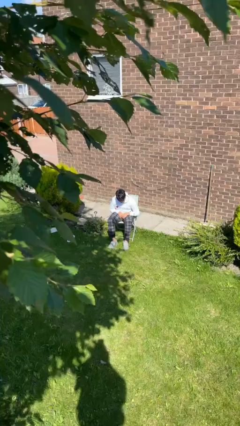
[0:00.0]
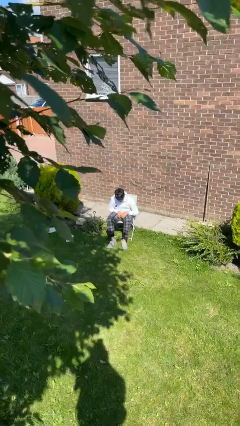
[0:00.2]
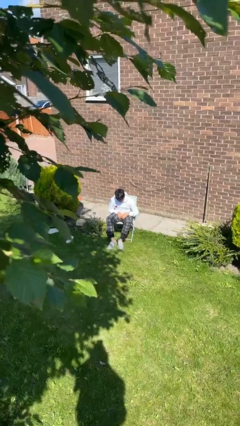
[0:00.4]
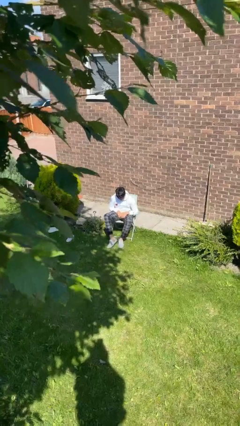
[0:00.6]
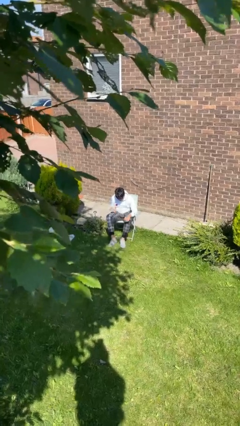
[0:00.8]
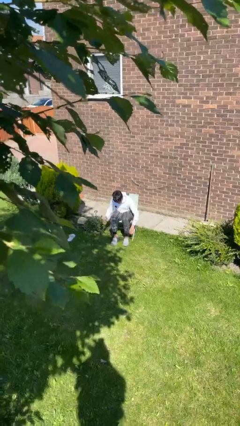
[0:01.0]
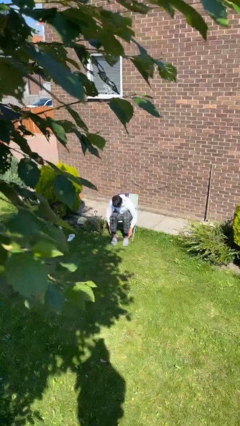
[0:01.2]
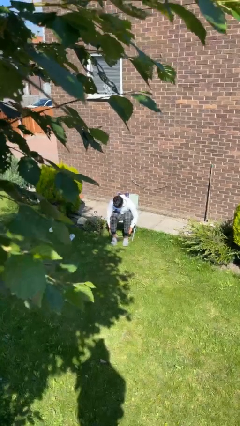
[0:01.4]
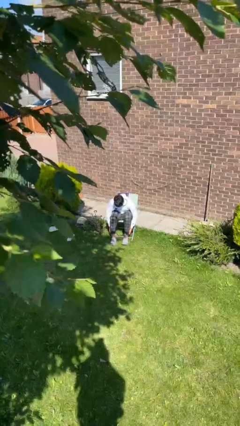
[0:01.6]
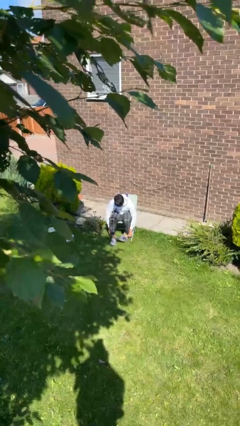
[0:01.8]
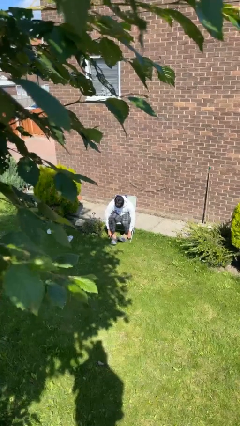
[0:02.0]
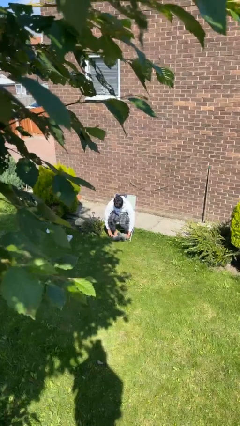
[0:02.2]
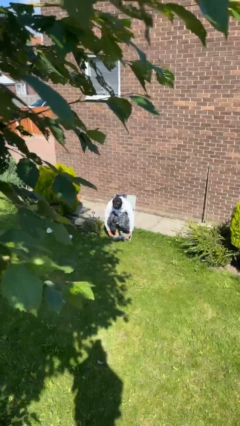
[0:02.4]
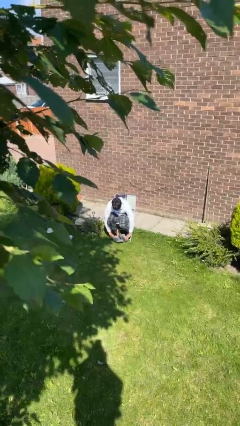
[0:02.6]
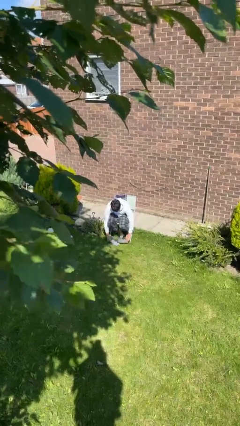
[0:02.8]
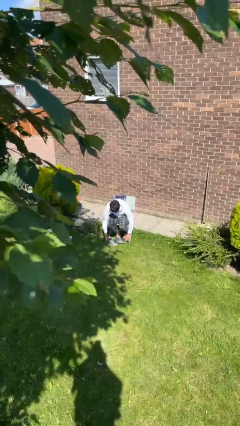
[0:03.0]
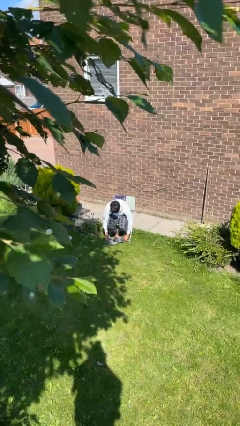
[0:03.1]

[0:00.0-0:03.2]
person takes off shoes

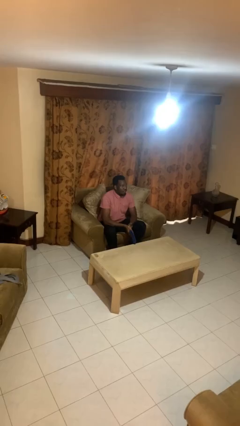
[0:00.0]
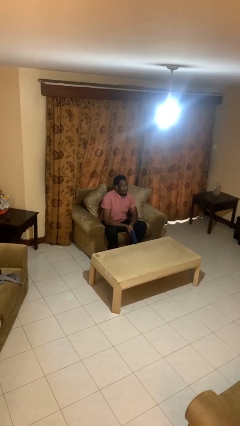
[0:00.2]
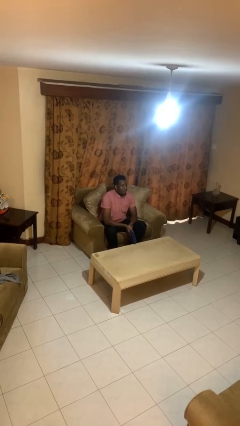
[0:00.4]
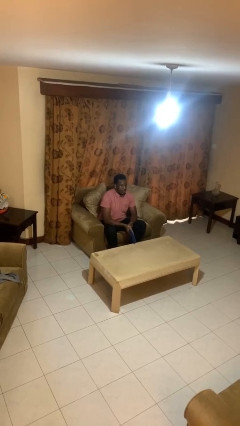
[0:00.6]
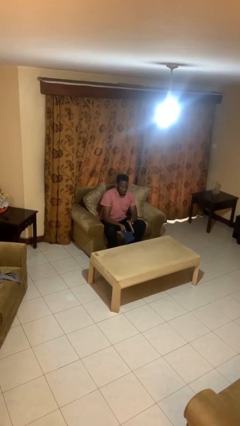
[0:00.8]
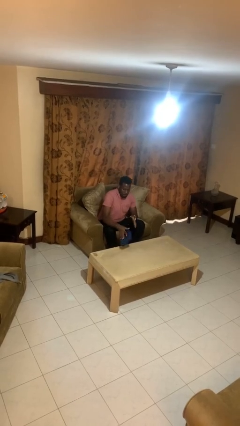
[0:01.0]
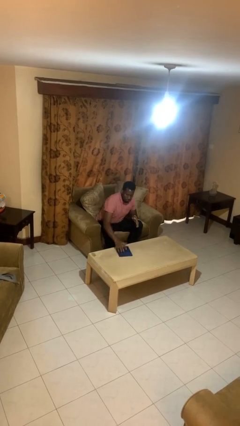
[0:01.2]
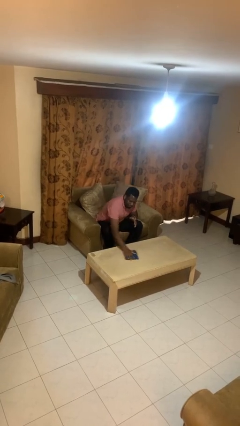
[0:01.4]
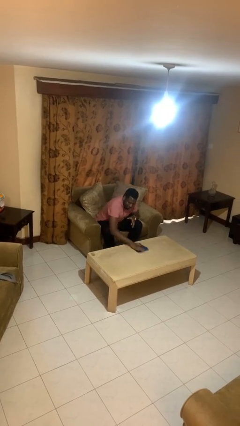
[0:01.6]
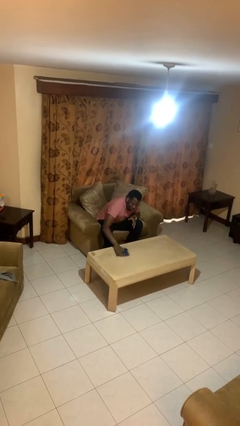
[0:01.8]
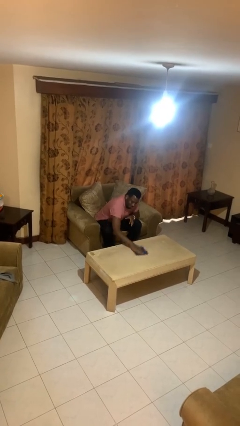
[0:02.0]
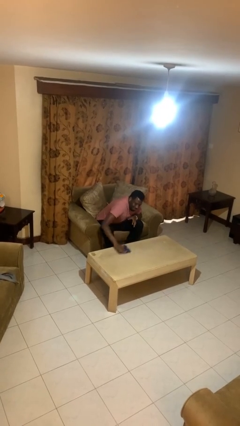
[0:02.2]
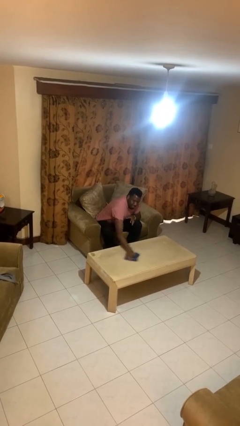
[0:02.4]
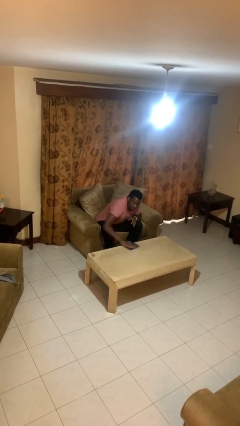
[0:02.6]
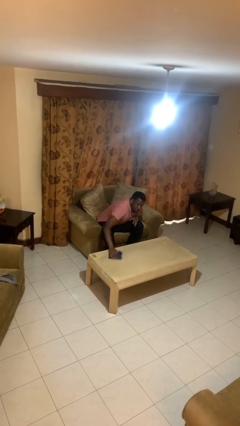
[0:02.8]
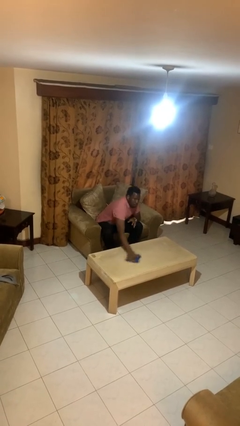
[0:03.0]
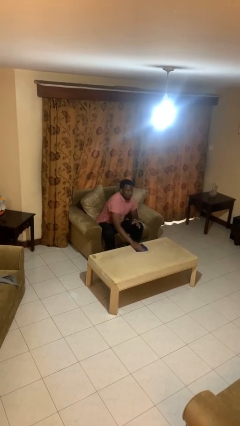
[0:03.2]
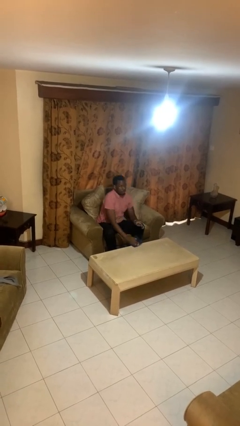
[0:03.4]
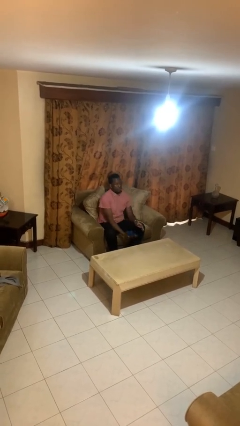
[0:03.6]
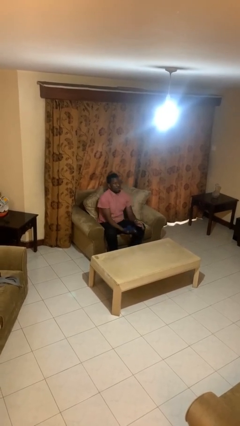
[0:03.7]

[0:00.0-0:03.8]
person cleans table with rag

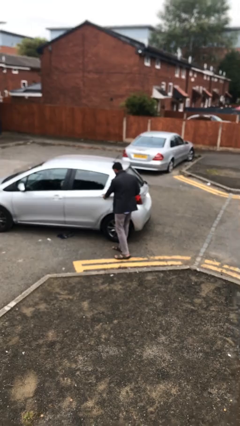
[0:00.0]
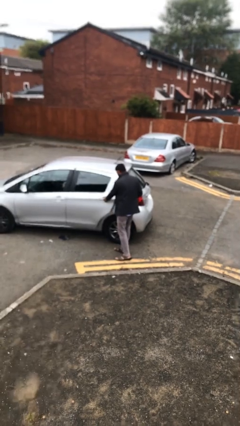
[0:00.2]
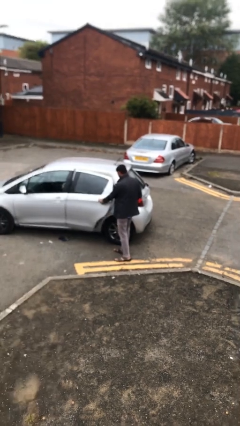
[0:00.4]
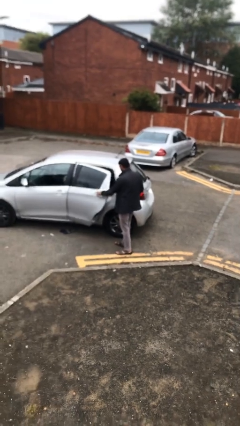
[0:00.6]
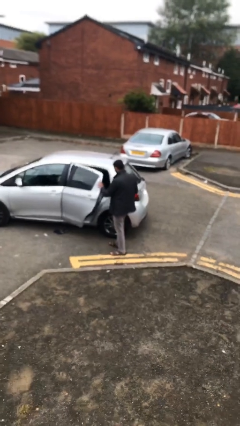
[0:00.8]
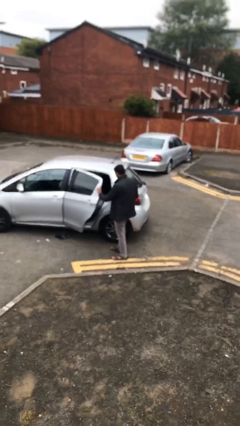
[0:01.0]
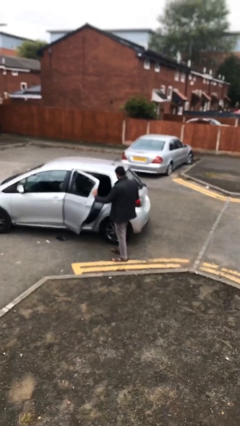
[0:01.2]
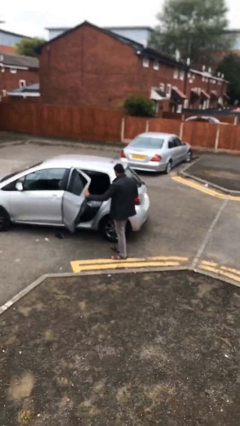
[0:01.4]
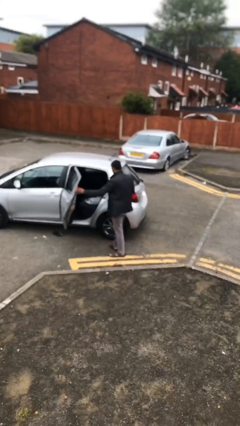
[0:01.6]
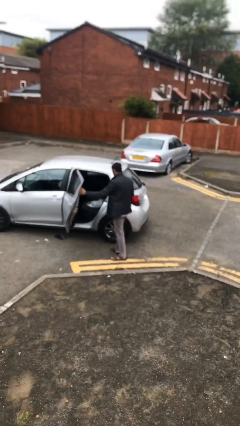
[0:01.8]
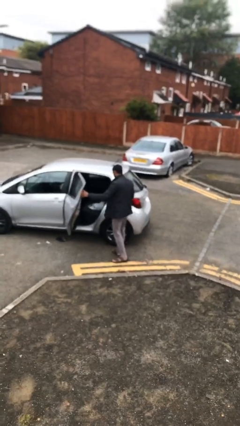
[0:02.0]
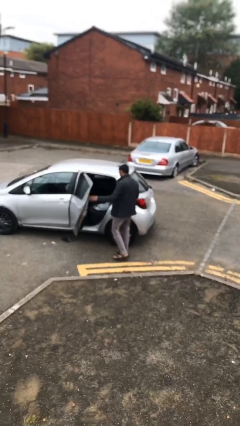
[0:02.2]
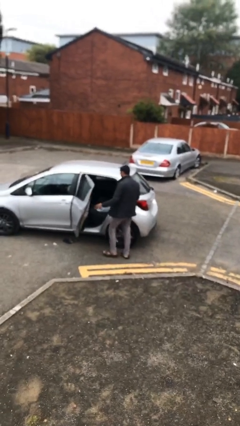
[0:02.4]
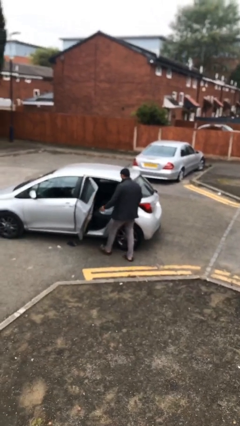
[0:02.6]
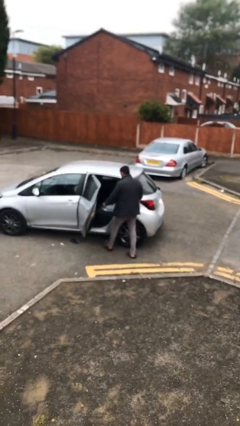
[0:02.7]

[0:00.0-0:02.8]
person opens car door

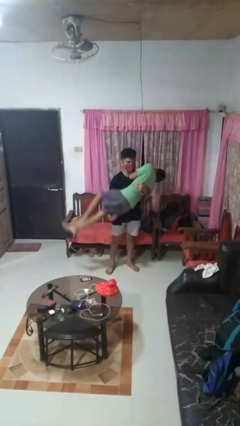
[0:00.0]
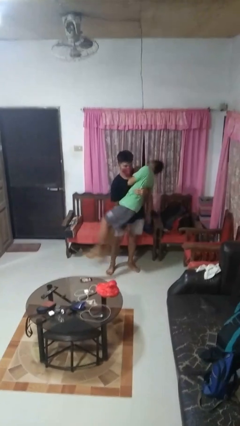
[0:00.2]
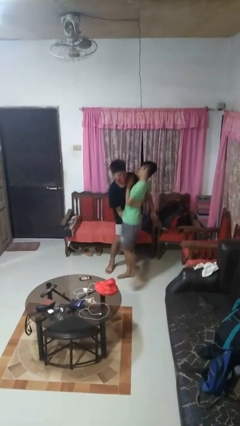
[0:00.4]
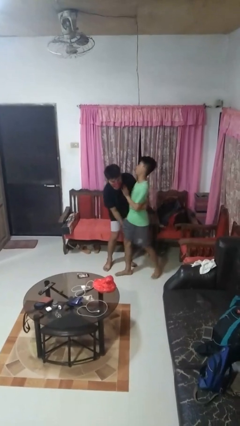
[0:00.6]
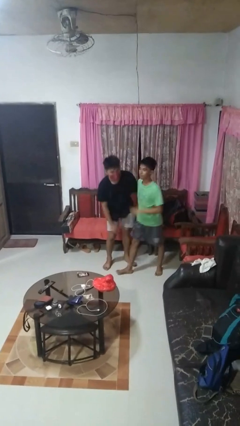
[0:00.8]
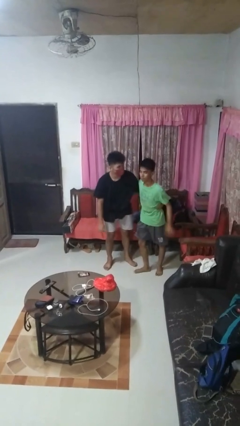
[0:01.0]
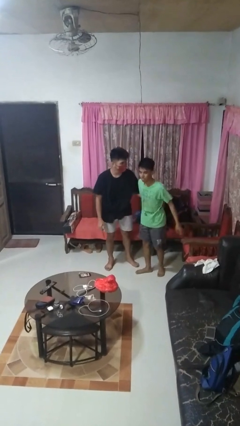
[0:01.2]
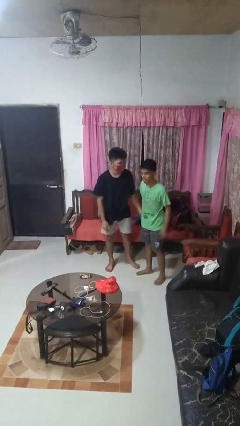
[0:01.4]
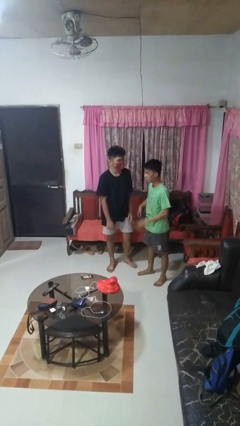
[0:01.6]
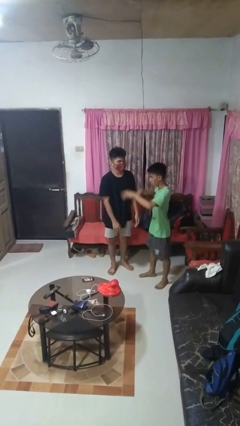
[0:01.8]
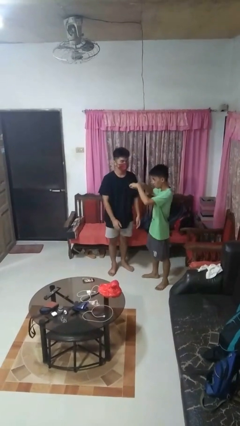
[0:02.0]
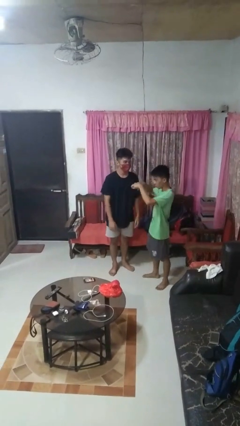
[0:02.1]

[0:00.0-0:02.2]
person puts down person

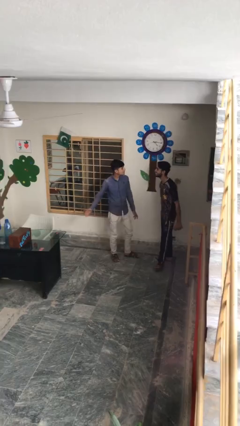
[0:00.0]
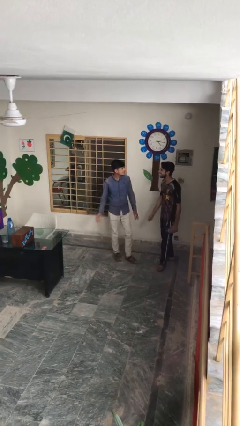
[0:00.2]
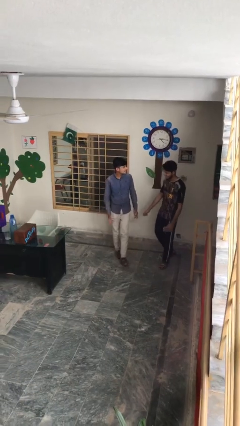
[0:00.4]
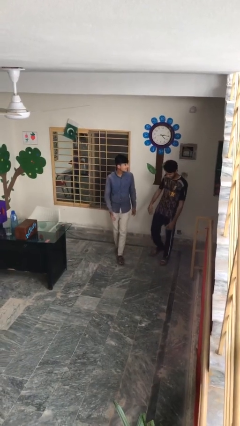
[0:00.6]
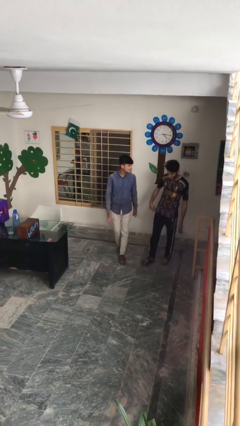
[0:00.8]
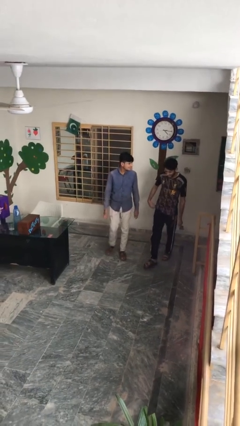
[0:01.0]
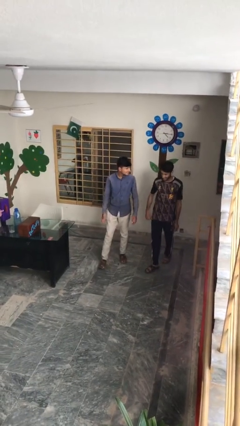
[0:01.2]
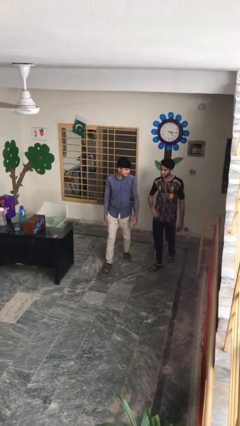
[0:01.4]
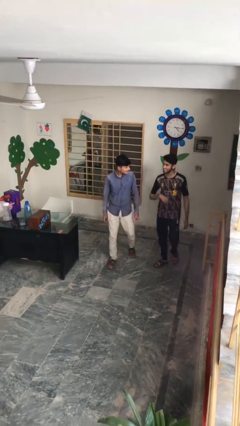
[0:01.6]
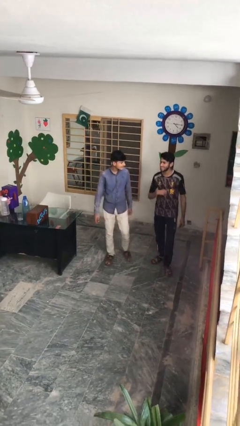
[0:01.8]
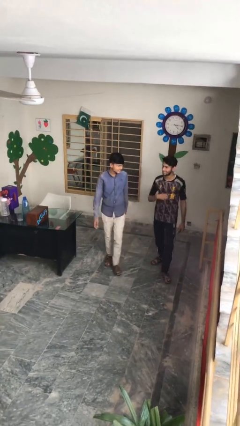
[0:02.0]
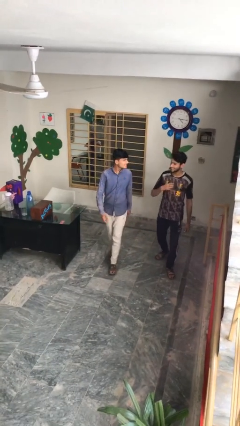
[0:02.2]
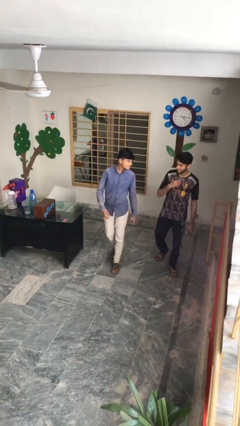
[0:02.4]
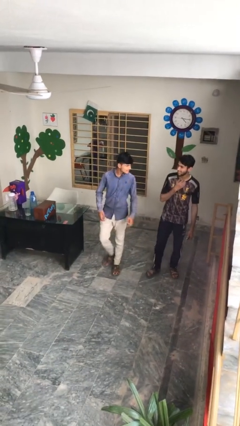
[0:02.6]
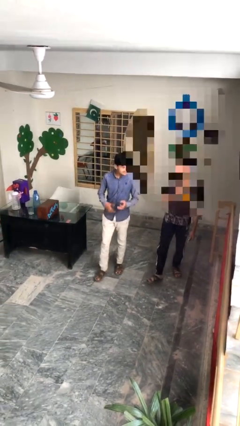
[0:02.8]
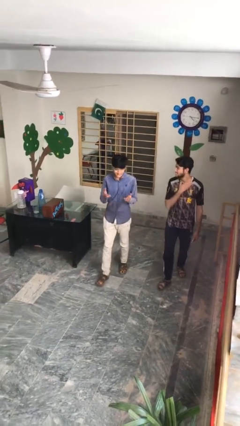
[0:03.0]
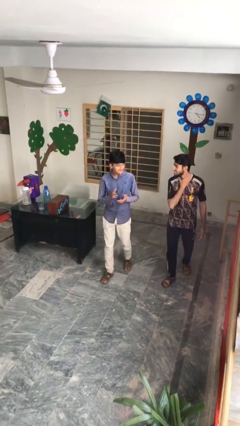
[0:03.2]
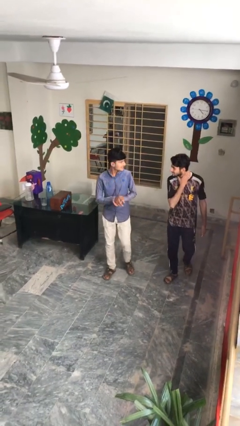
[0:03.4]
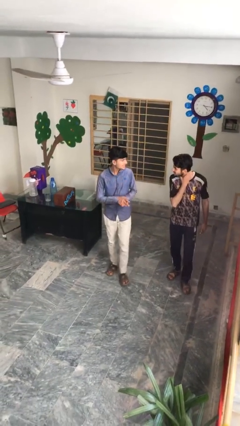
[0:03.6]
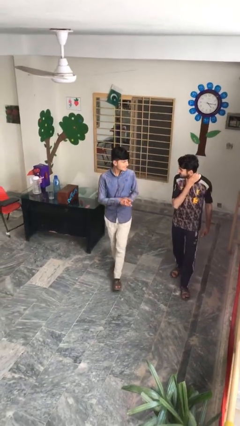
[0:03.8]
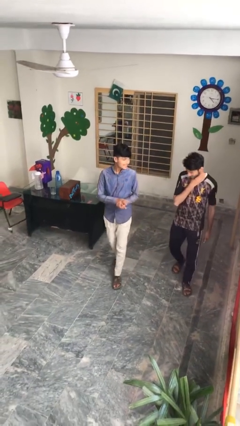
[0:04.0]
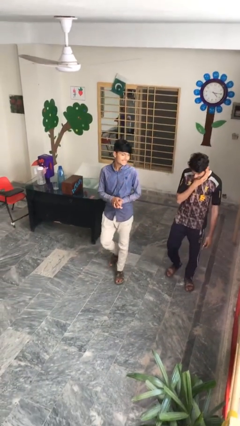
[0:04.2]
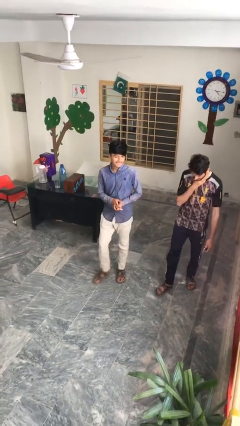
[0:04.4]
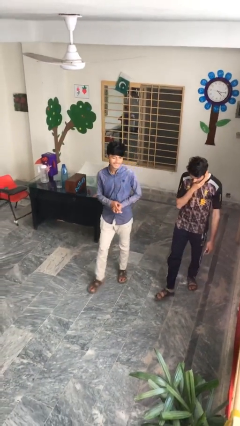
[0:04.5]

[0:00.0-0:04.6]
person talks to person

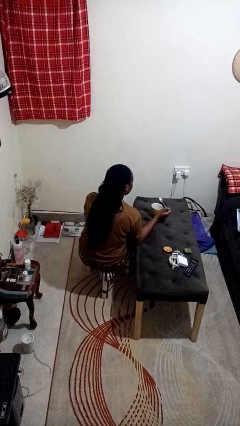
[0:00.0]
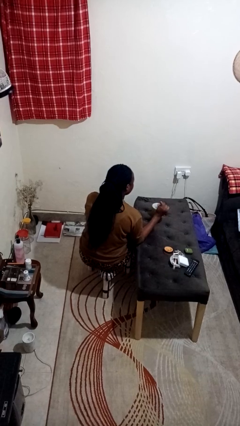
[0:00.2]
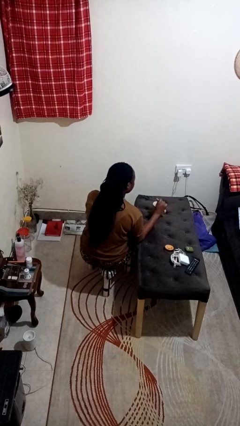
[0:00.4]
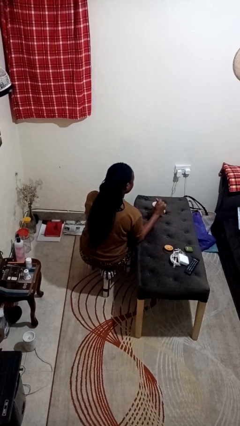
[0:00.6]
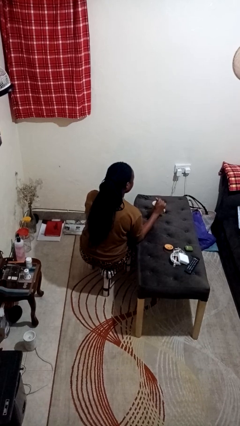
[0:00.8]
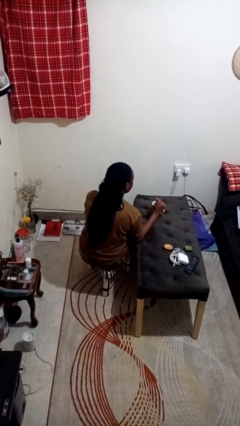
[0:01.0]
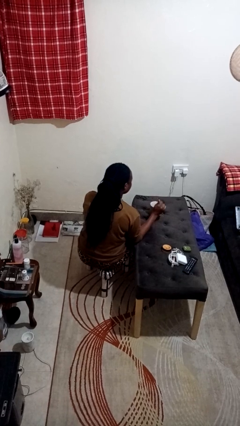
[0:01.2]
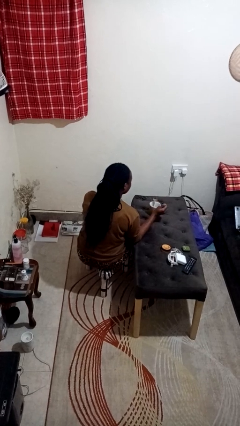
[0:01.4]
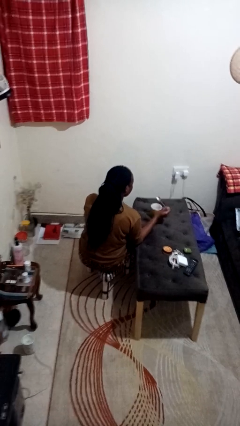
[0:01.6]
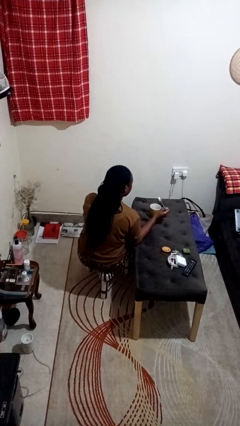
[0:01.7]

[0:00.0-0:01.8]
person stirs mug
